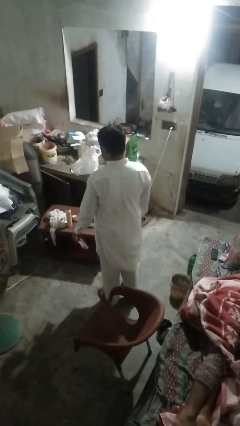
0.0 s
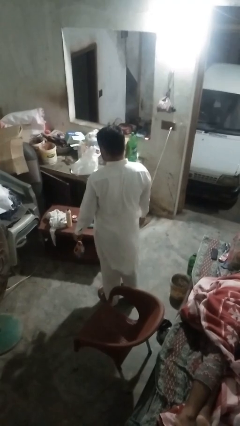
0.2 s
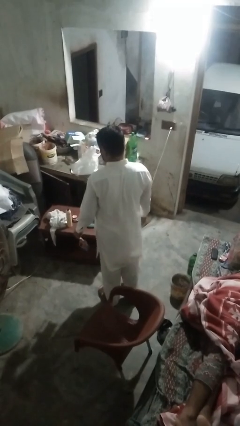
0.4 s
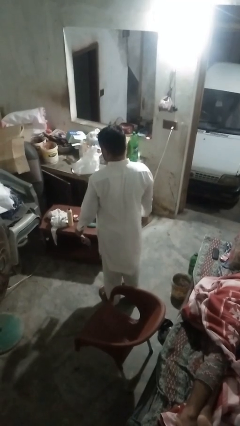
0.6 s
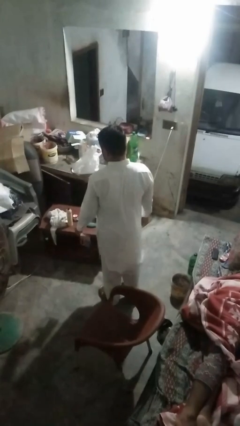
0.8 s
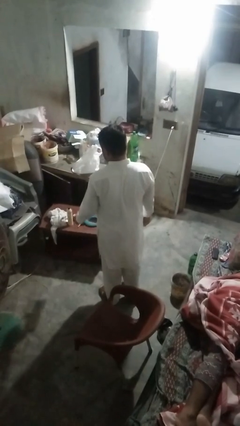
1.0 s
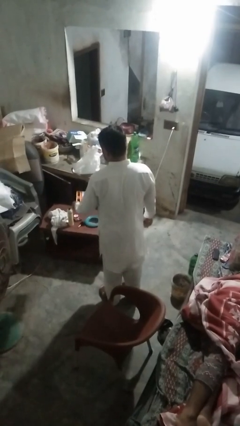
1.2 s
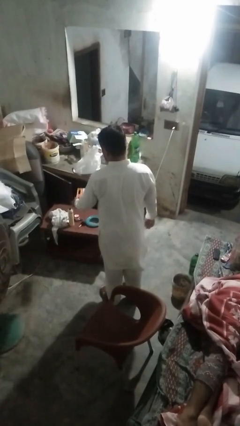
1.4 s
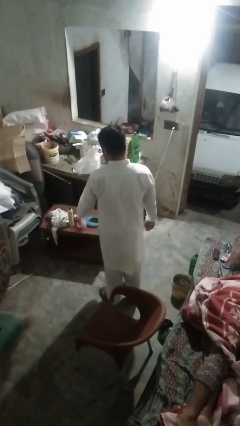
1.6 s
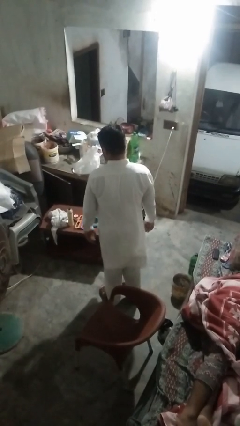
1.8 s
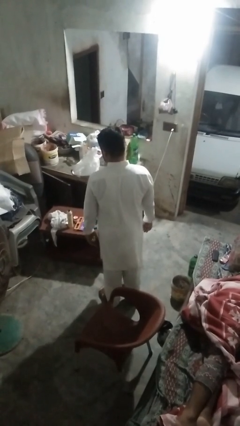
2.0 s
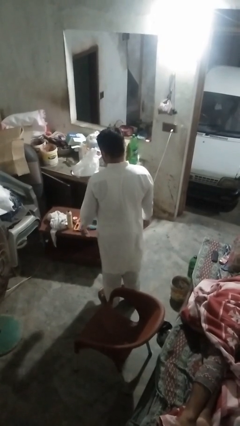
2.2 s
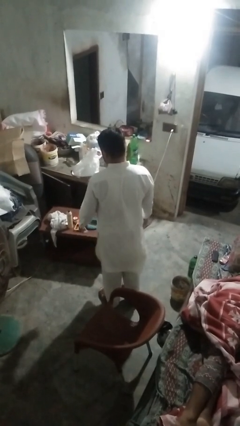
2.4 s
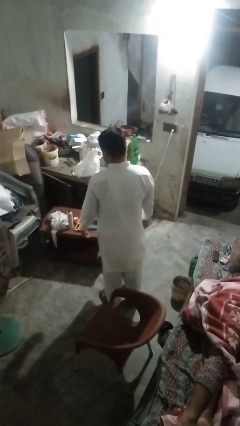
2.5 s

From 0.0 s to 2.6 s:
person throws object on table

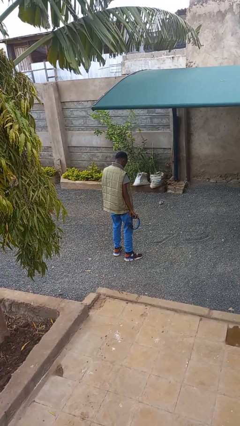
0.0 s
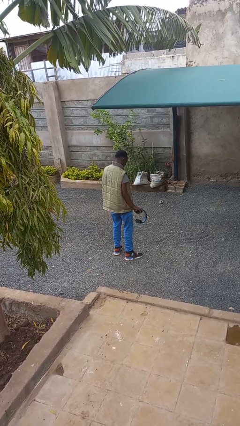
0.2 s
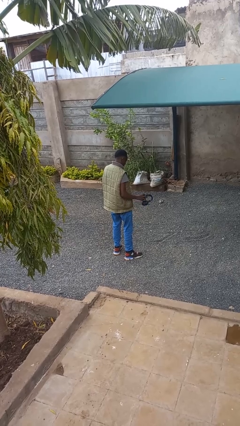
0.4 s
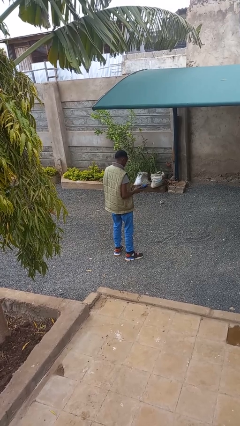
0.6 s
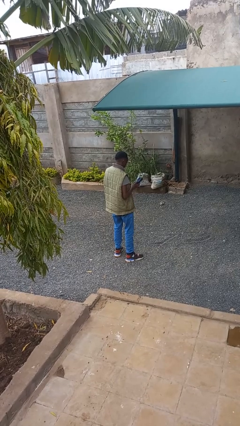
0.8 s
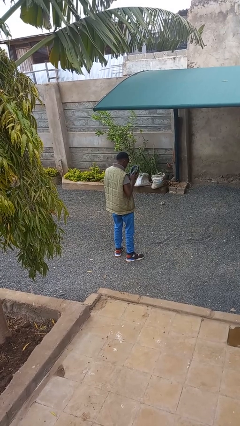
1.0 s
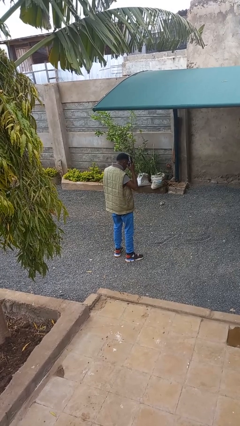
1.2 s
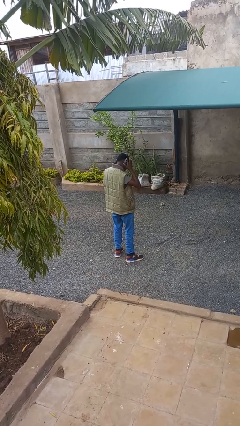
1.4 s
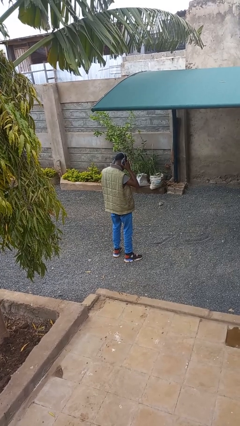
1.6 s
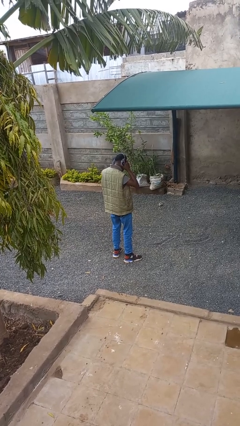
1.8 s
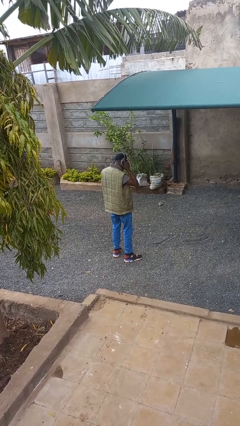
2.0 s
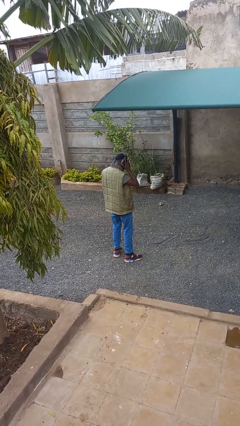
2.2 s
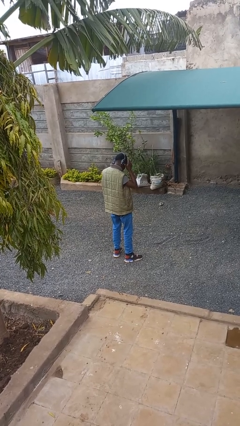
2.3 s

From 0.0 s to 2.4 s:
person puts on headphones

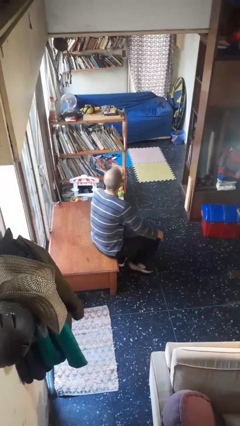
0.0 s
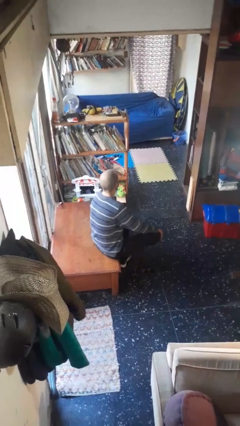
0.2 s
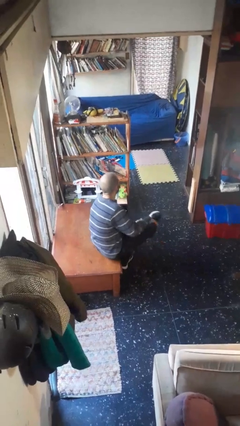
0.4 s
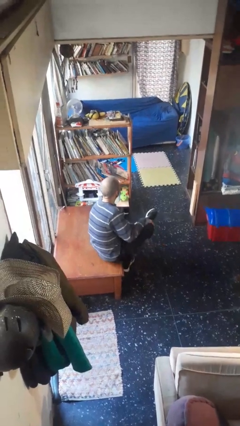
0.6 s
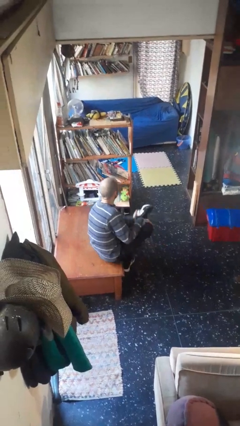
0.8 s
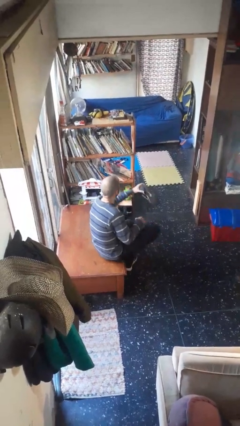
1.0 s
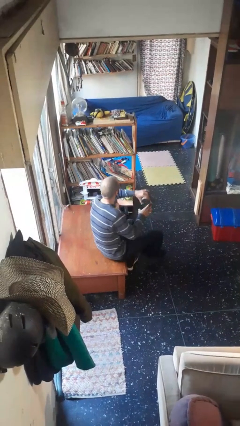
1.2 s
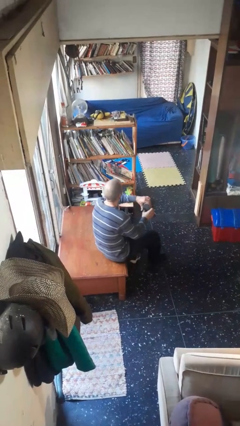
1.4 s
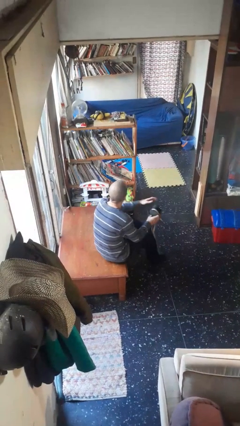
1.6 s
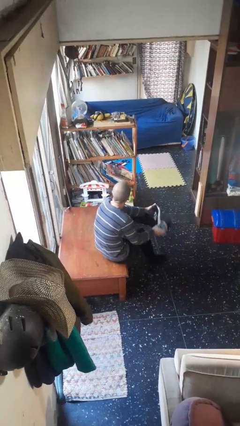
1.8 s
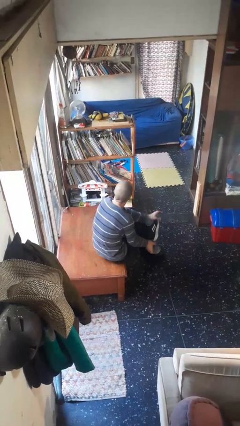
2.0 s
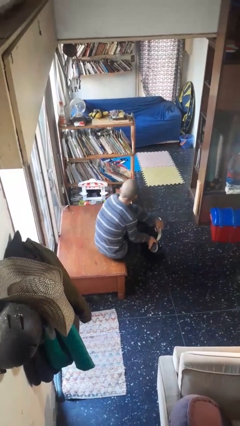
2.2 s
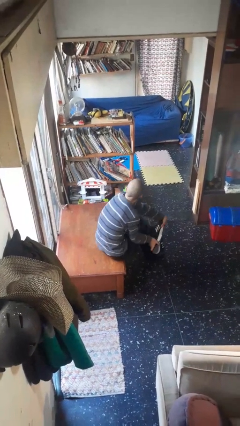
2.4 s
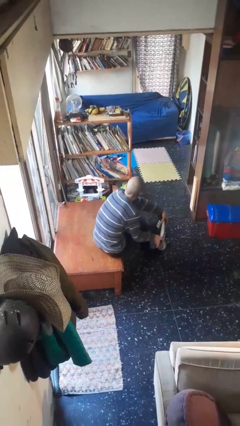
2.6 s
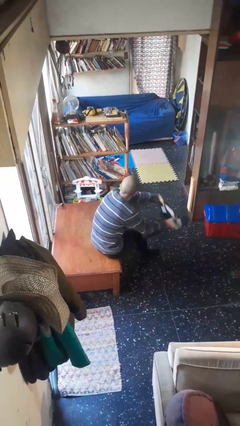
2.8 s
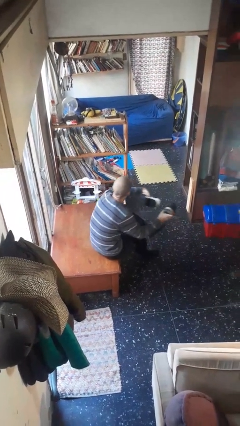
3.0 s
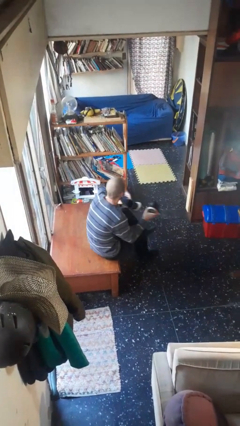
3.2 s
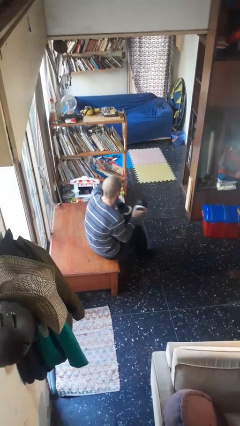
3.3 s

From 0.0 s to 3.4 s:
person takes off shoes

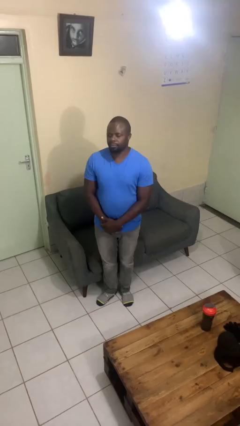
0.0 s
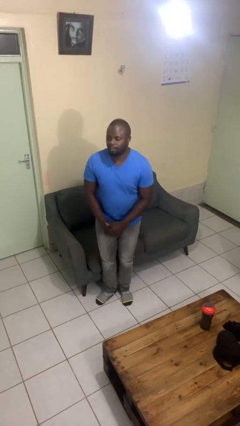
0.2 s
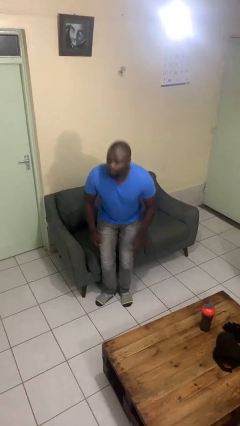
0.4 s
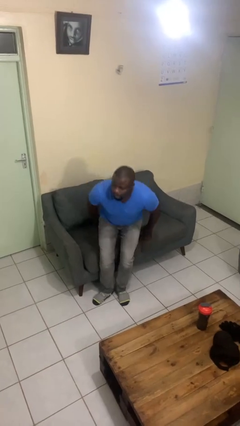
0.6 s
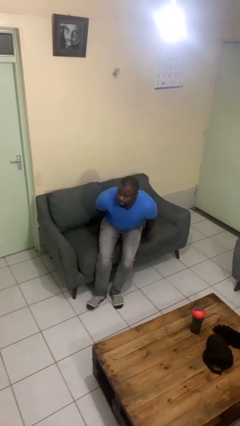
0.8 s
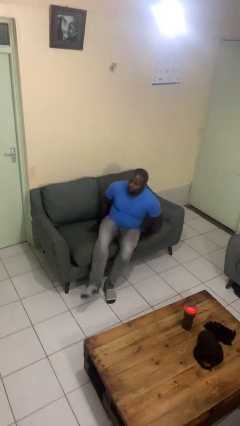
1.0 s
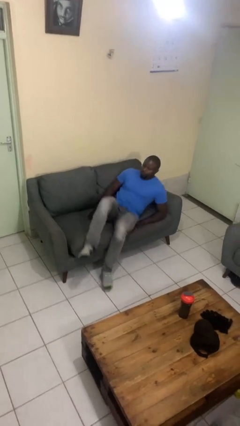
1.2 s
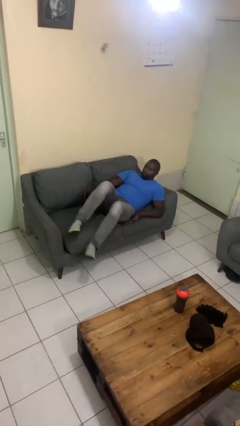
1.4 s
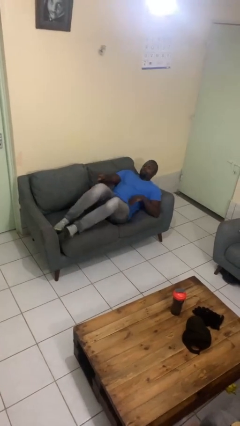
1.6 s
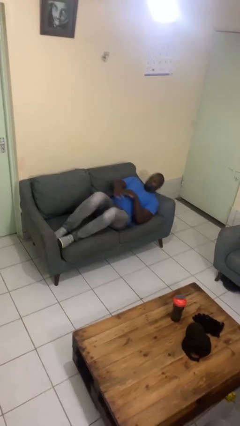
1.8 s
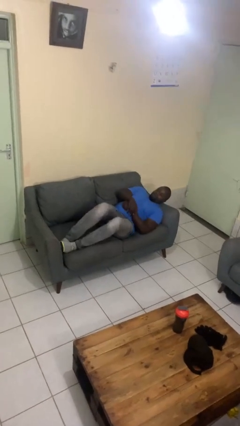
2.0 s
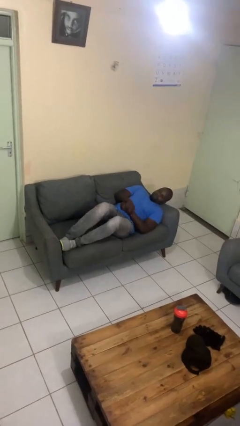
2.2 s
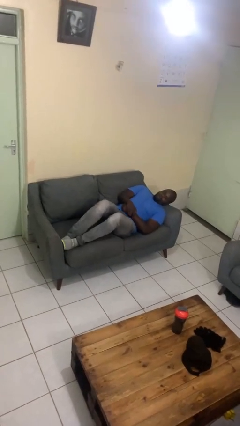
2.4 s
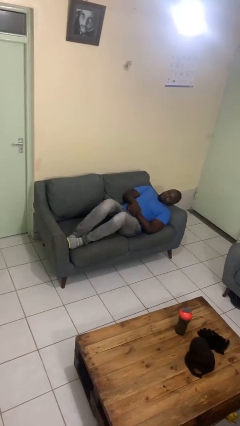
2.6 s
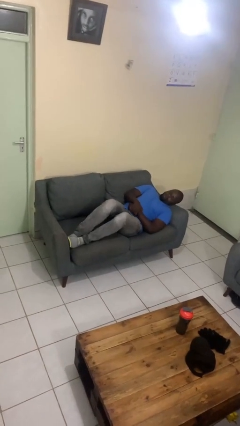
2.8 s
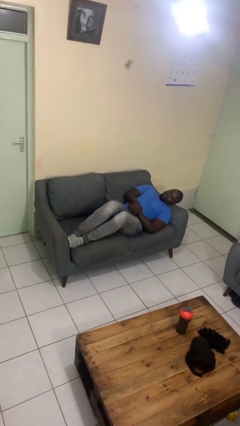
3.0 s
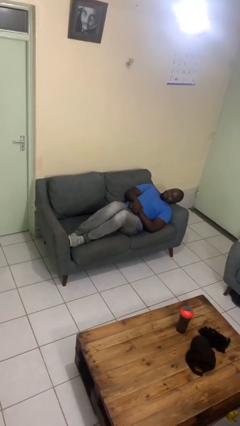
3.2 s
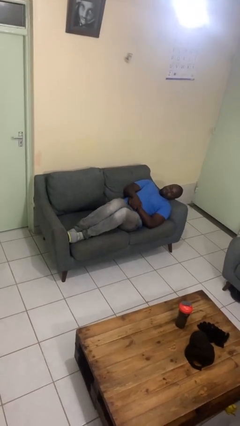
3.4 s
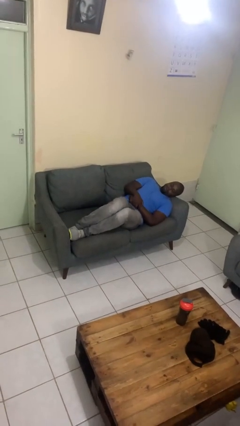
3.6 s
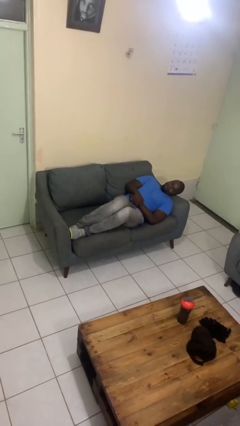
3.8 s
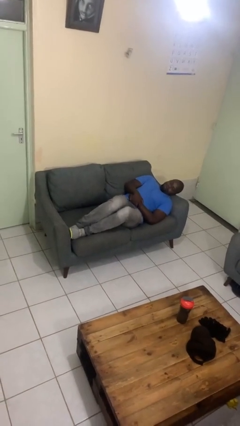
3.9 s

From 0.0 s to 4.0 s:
person lies down on couch

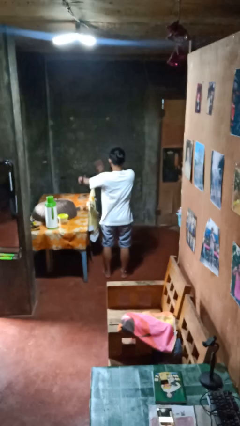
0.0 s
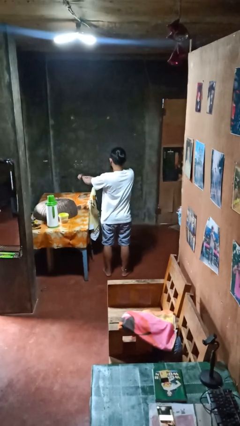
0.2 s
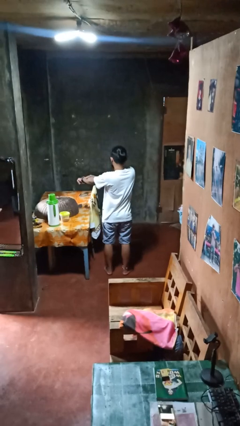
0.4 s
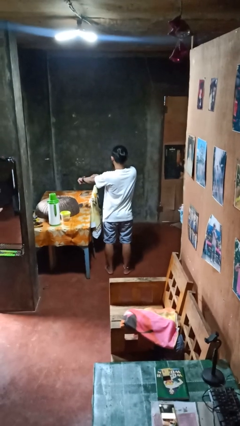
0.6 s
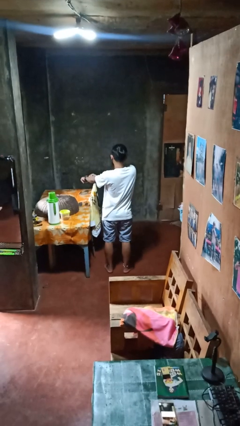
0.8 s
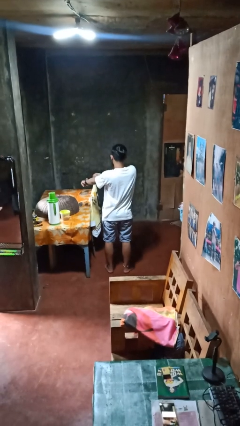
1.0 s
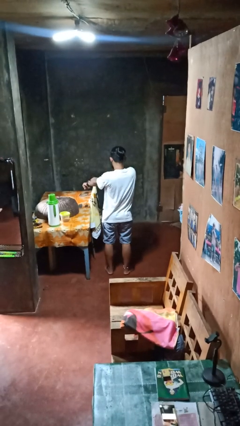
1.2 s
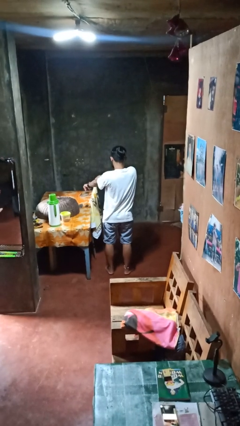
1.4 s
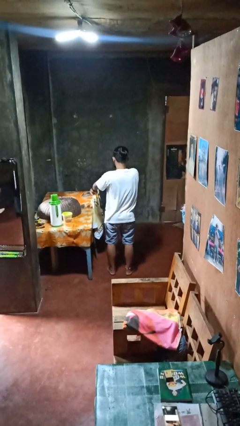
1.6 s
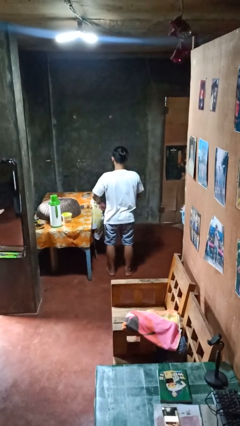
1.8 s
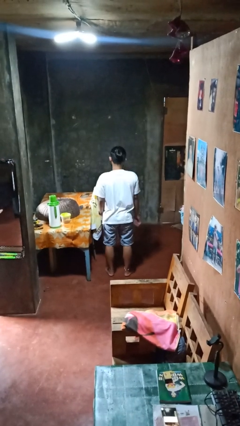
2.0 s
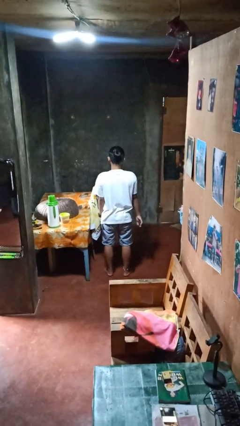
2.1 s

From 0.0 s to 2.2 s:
person swats bug

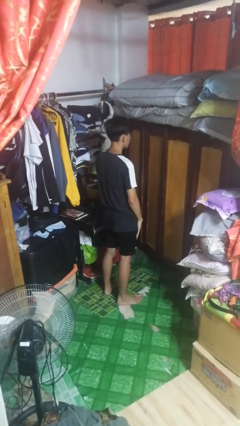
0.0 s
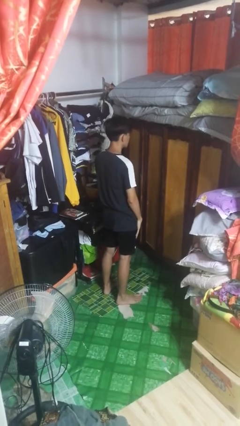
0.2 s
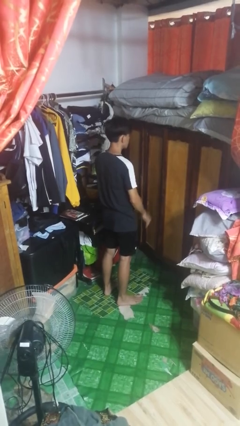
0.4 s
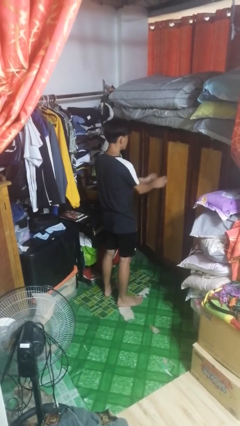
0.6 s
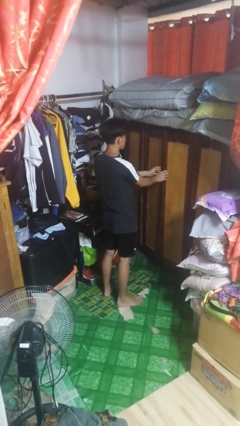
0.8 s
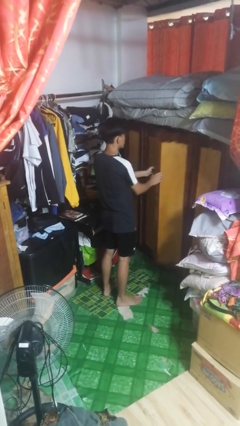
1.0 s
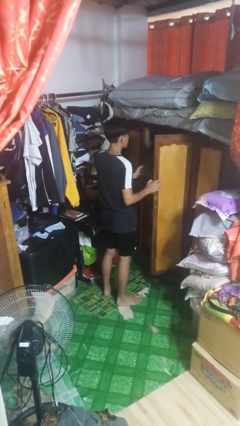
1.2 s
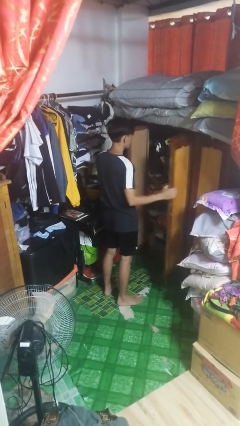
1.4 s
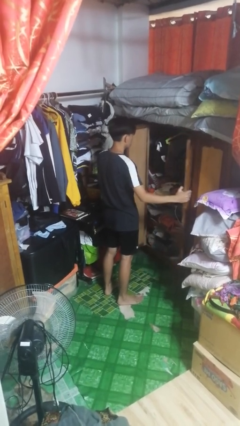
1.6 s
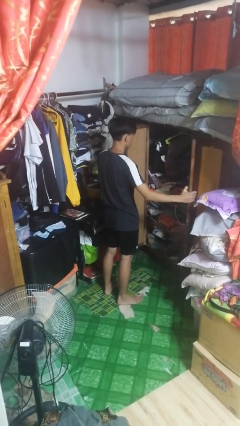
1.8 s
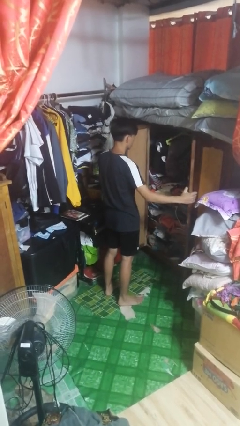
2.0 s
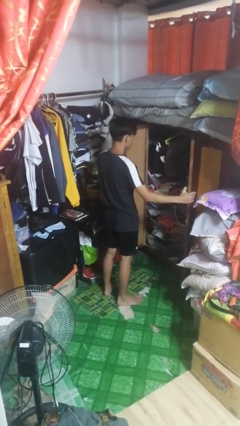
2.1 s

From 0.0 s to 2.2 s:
person opens dresser drawer

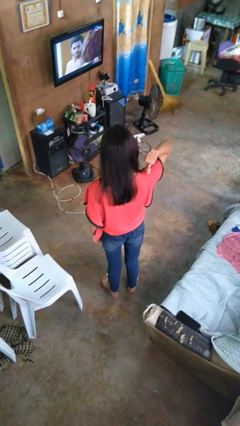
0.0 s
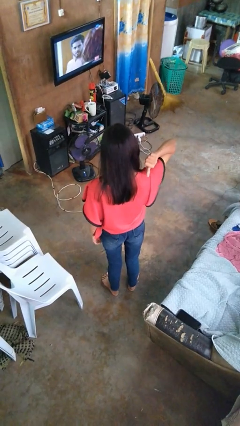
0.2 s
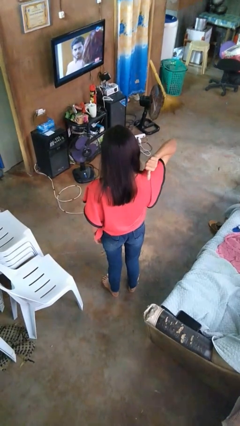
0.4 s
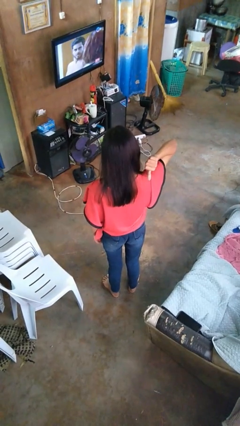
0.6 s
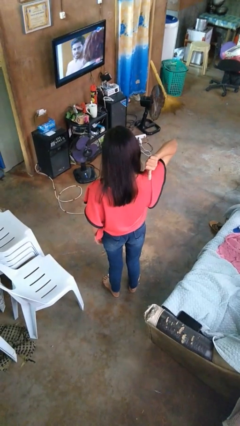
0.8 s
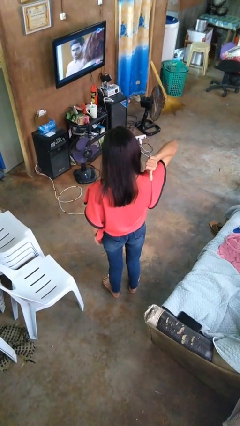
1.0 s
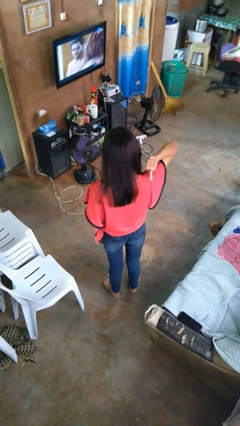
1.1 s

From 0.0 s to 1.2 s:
person gestures behind me
